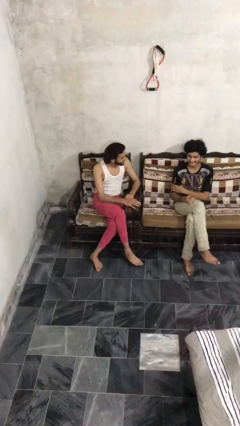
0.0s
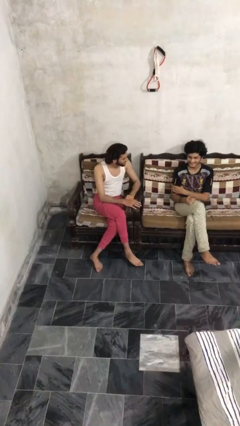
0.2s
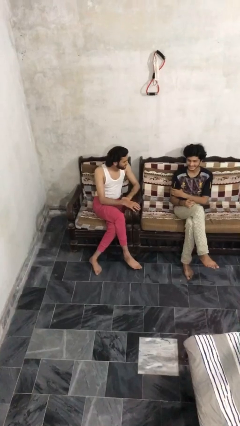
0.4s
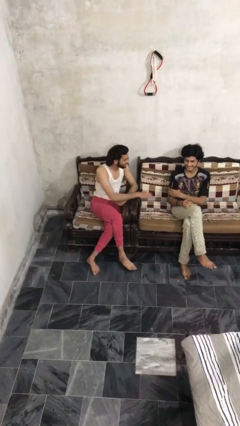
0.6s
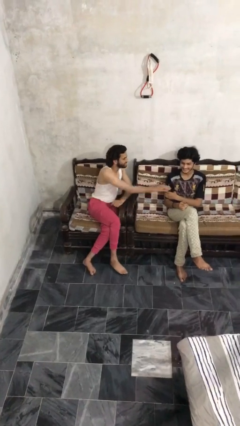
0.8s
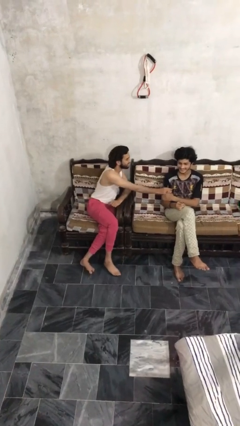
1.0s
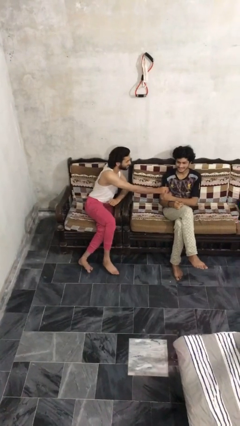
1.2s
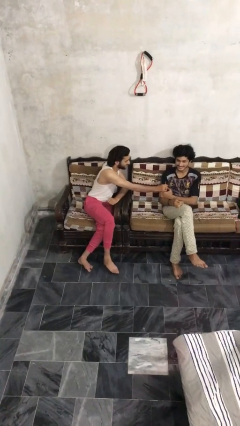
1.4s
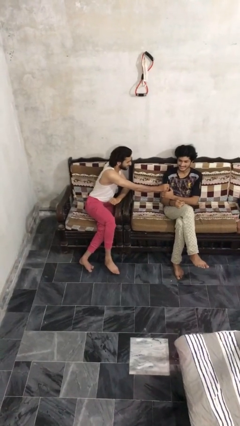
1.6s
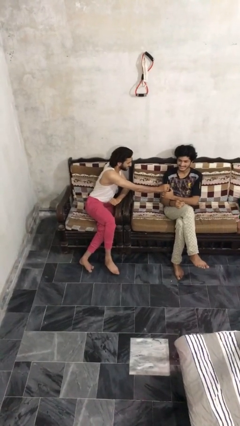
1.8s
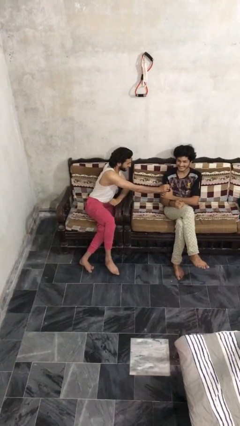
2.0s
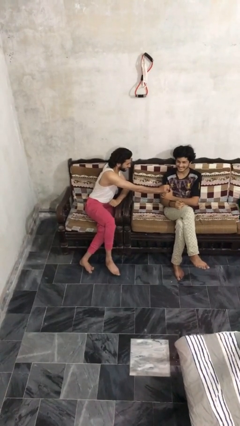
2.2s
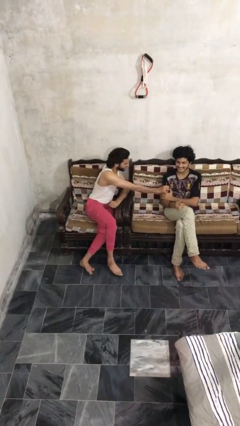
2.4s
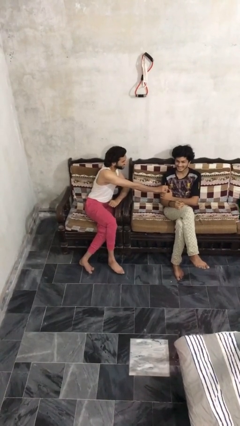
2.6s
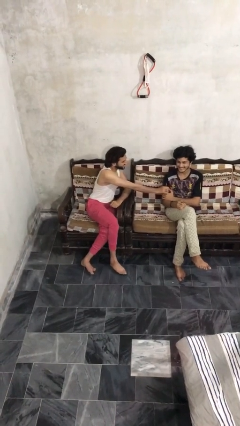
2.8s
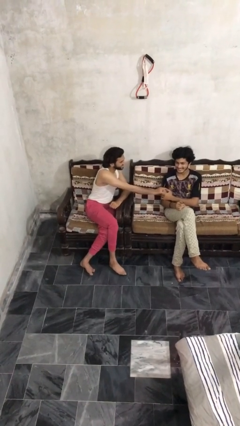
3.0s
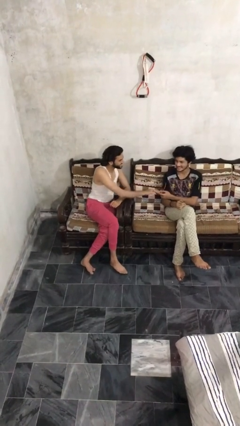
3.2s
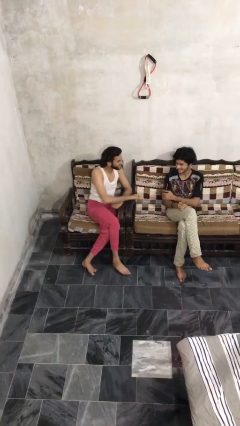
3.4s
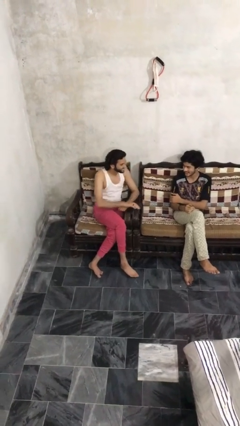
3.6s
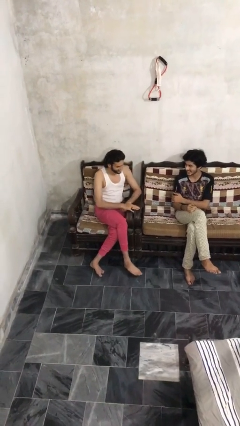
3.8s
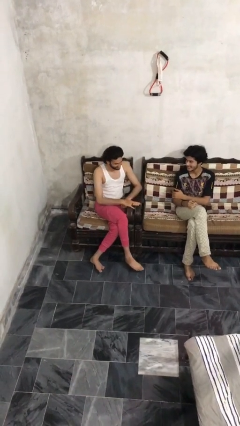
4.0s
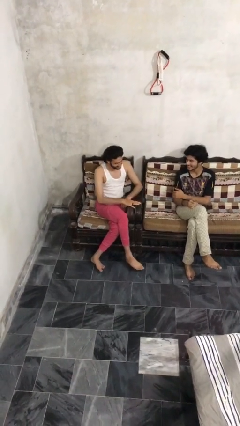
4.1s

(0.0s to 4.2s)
person grabs person by bicep

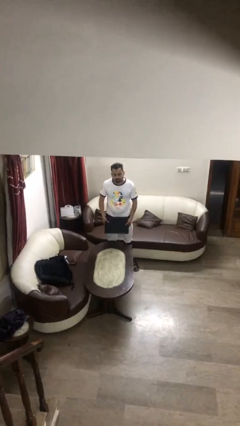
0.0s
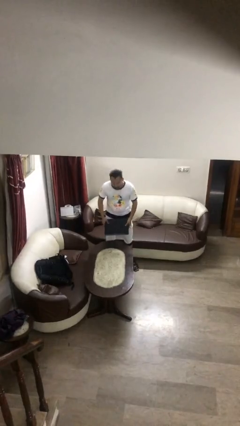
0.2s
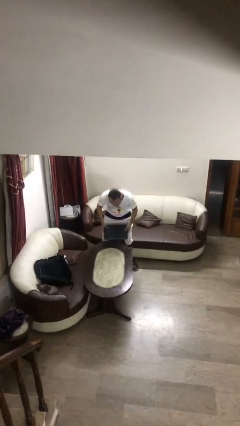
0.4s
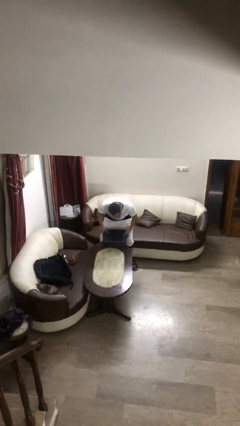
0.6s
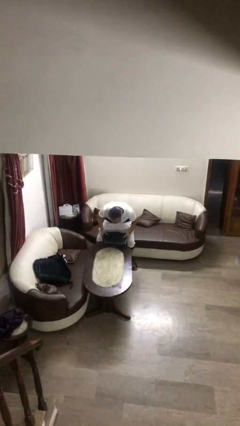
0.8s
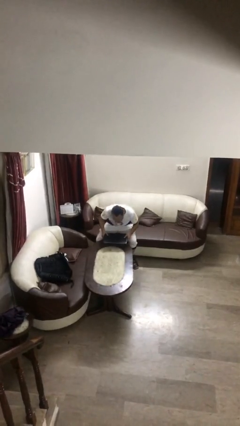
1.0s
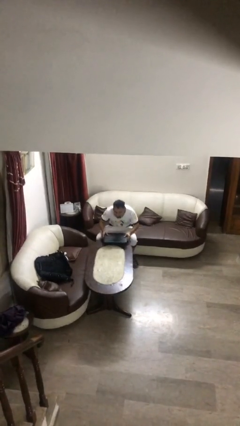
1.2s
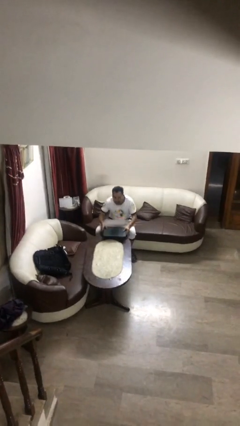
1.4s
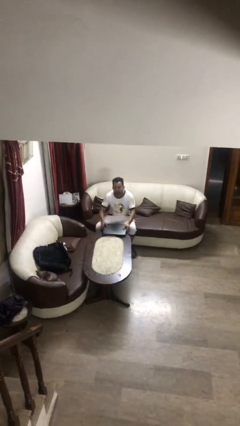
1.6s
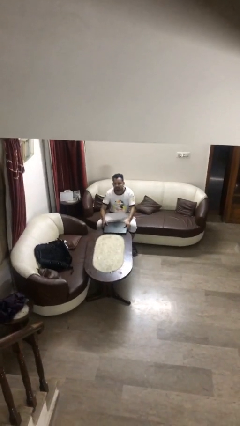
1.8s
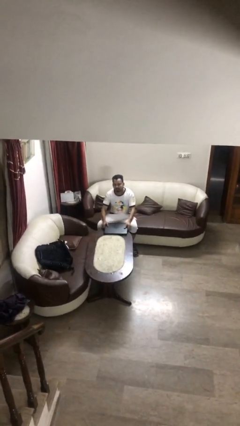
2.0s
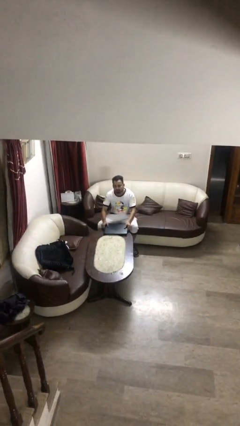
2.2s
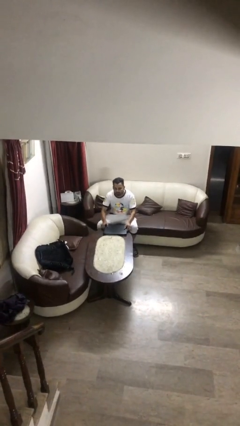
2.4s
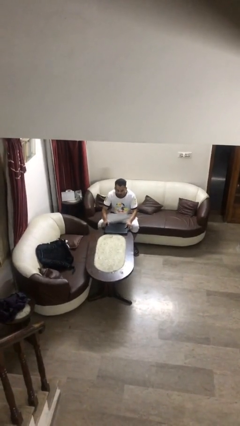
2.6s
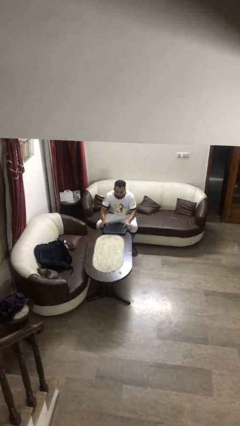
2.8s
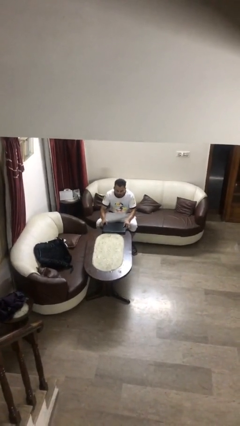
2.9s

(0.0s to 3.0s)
person sits down

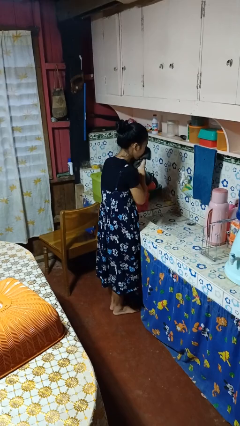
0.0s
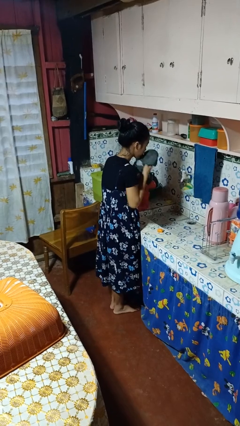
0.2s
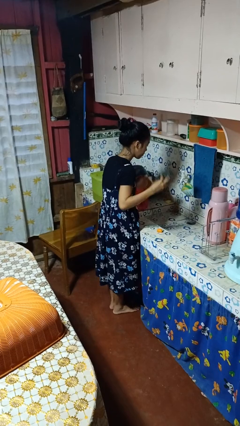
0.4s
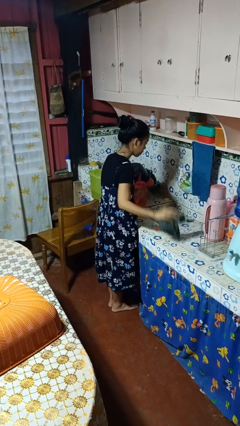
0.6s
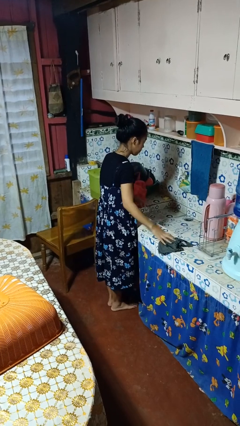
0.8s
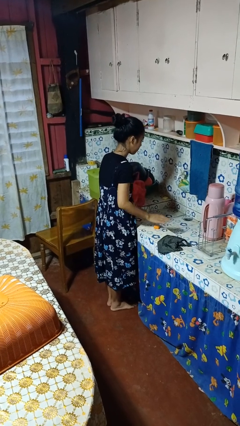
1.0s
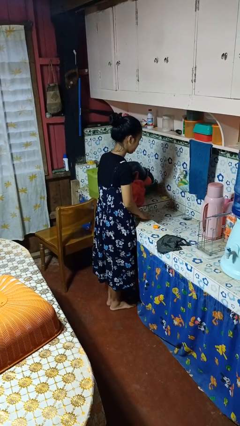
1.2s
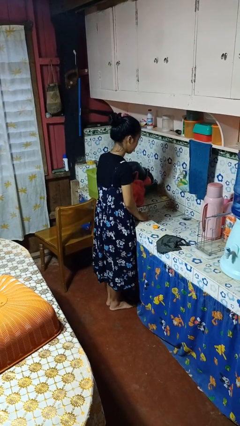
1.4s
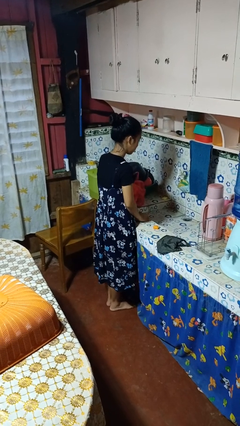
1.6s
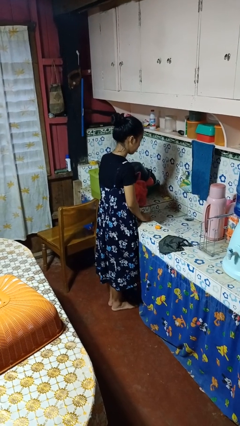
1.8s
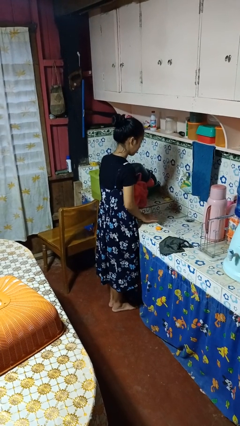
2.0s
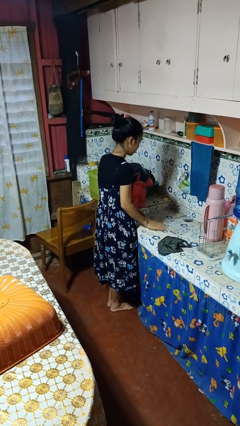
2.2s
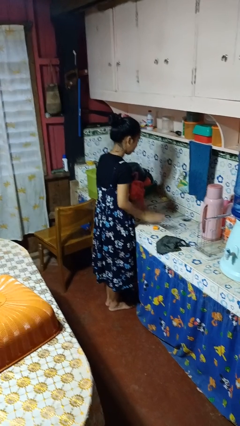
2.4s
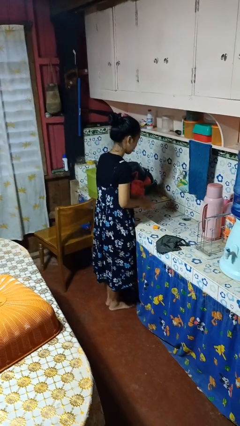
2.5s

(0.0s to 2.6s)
person dries face with towel

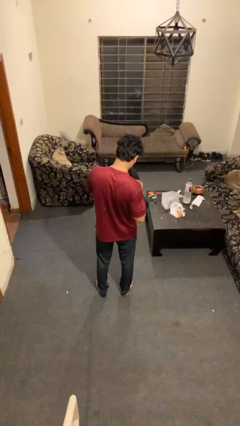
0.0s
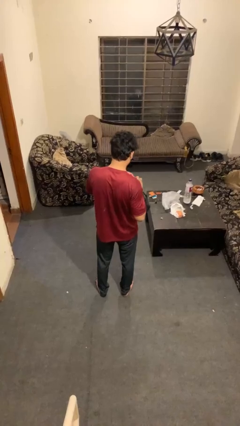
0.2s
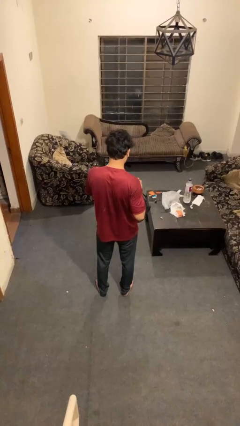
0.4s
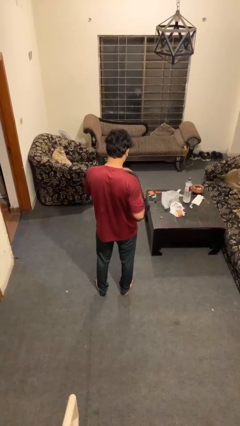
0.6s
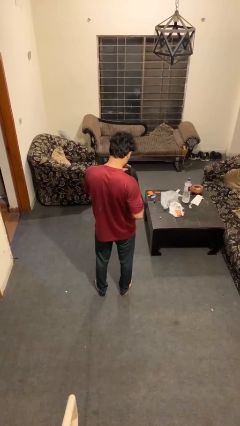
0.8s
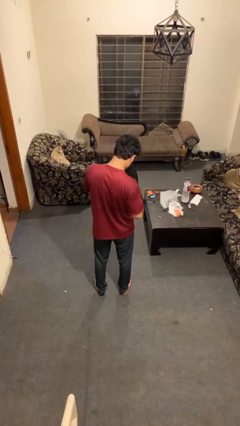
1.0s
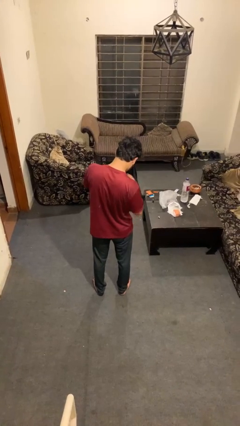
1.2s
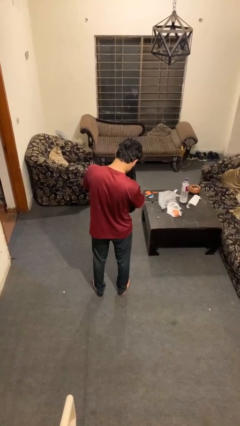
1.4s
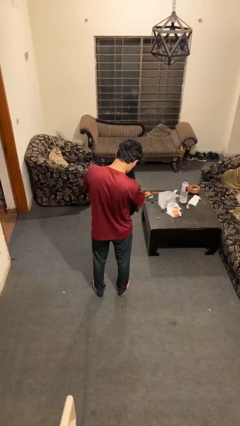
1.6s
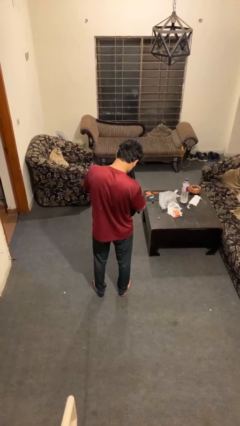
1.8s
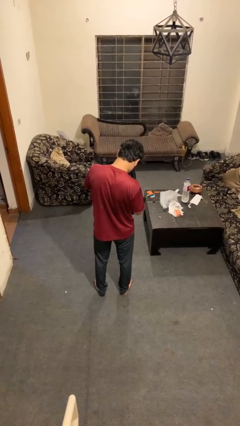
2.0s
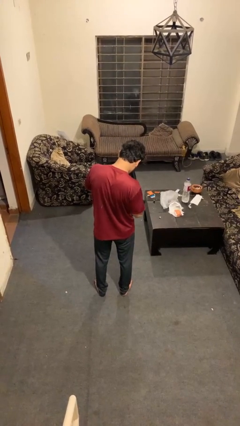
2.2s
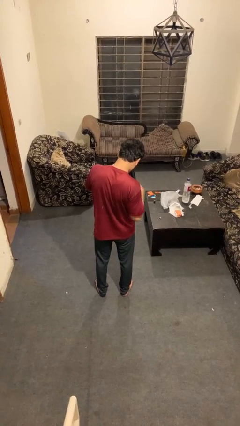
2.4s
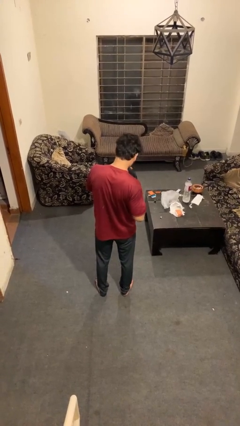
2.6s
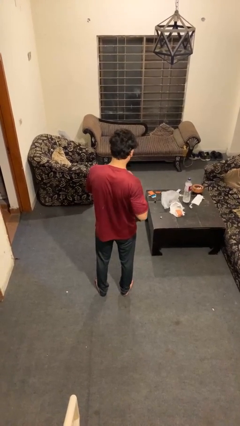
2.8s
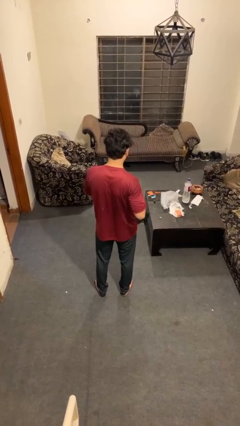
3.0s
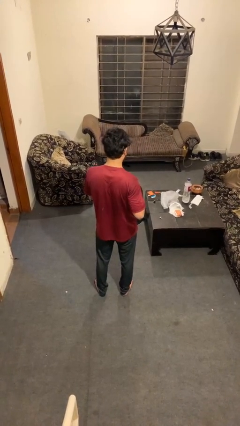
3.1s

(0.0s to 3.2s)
person searches in bag

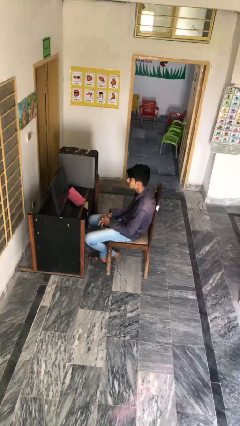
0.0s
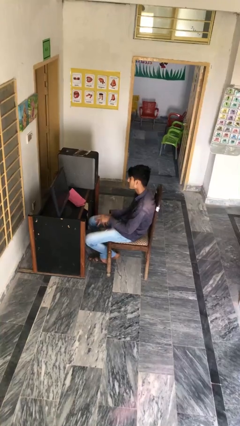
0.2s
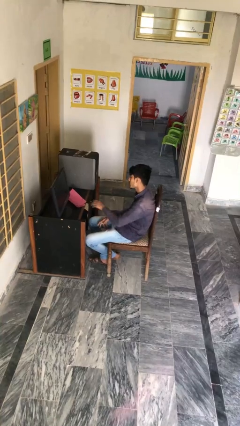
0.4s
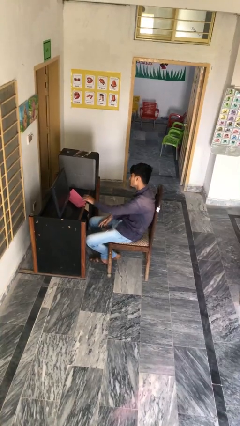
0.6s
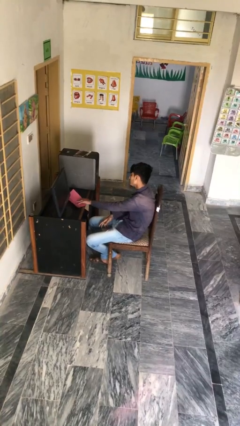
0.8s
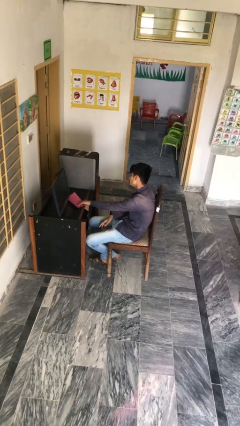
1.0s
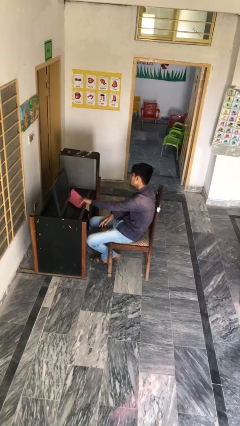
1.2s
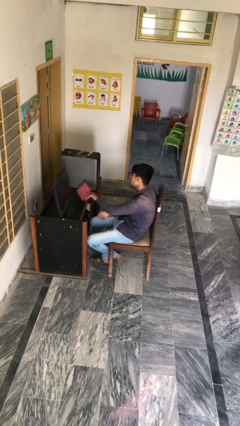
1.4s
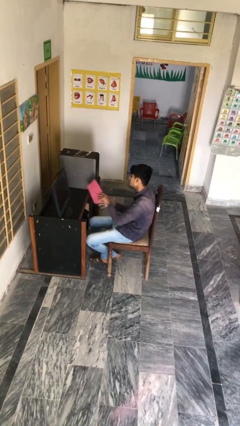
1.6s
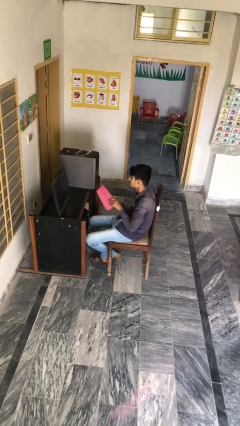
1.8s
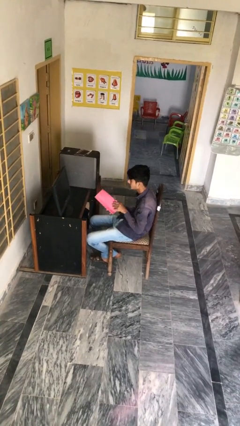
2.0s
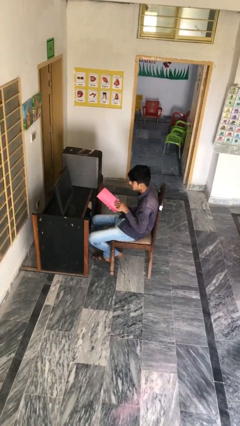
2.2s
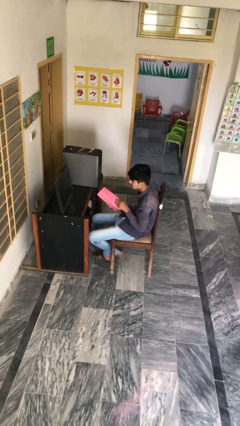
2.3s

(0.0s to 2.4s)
person picks up object from table

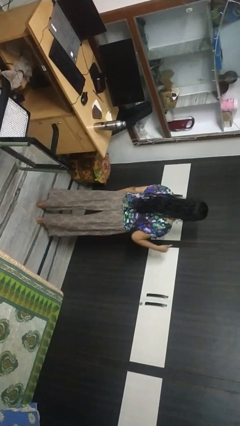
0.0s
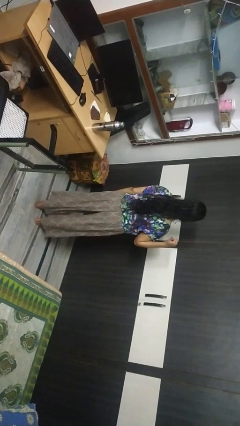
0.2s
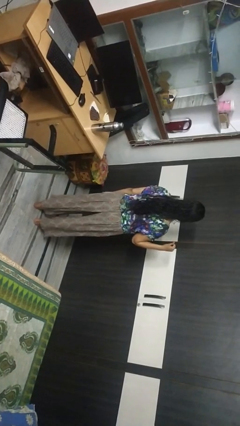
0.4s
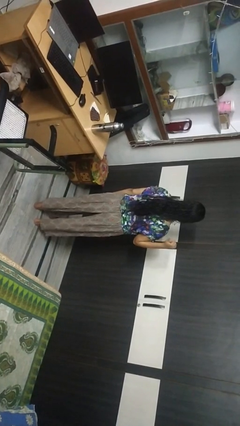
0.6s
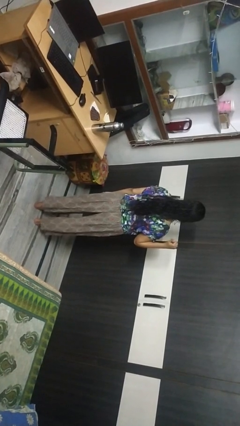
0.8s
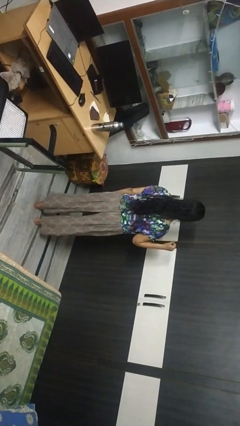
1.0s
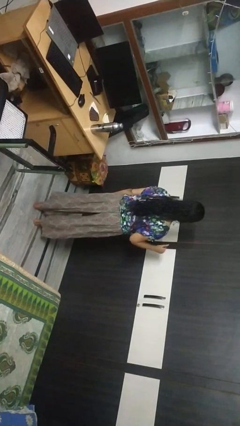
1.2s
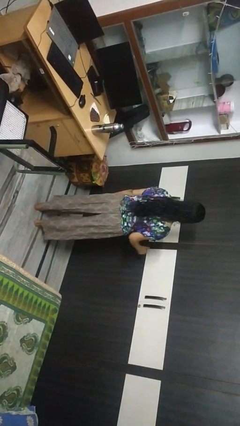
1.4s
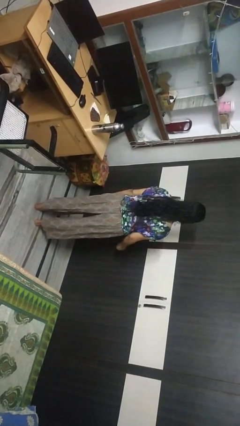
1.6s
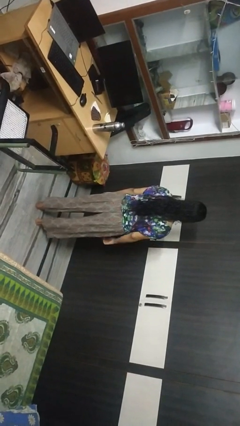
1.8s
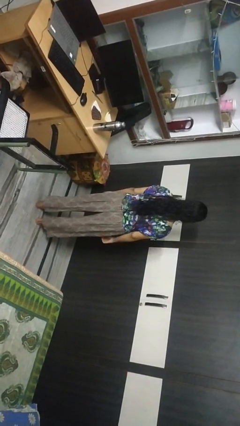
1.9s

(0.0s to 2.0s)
person gestures behind me
